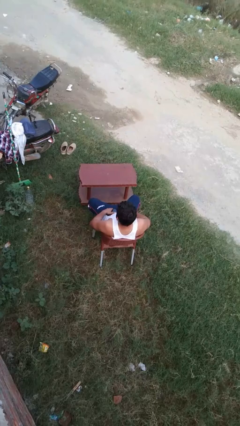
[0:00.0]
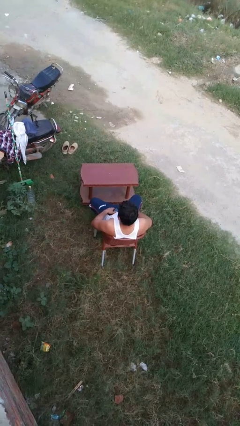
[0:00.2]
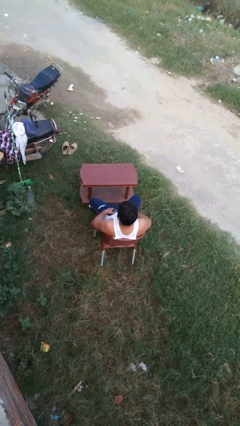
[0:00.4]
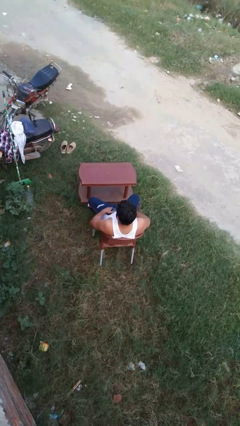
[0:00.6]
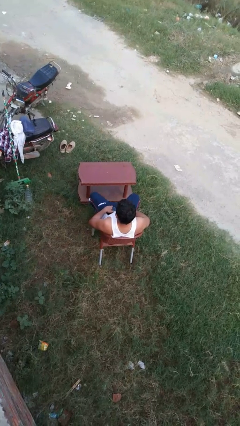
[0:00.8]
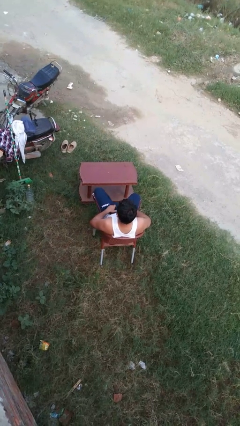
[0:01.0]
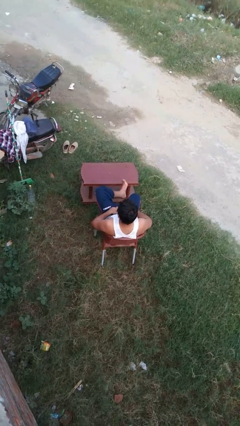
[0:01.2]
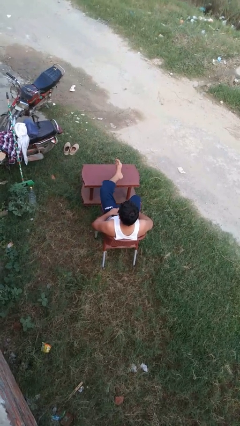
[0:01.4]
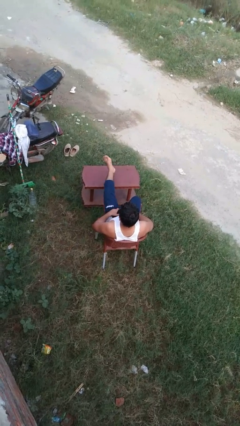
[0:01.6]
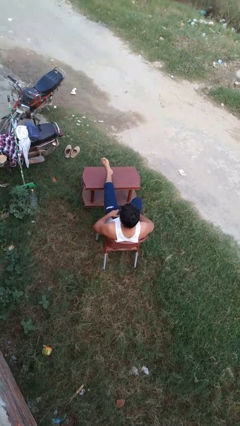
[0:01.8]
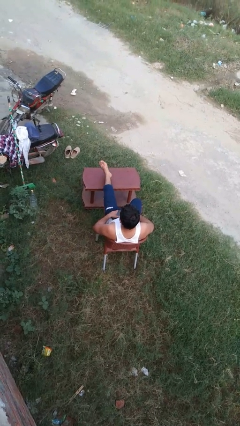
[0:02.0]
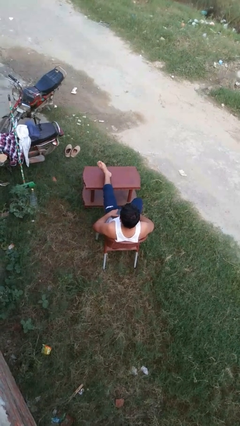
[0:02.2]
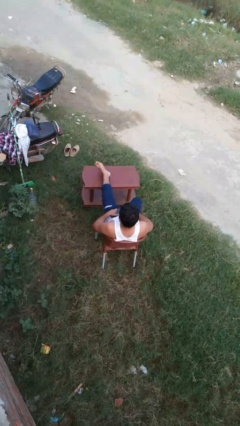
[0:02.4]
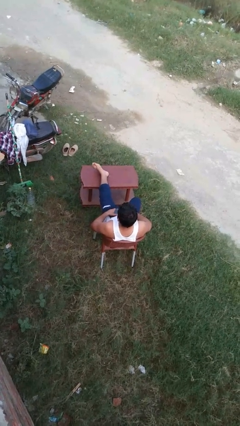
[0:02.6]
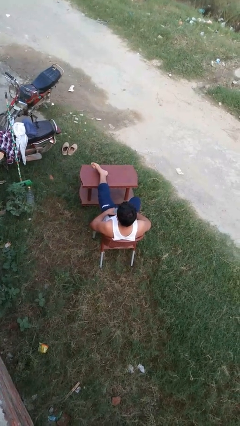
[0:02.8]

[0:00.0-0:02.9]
person puts feet up

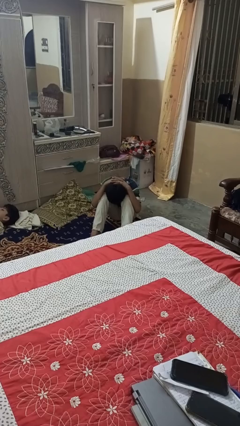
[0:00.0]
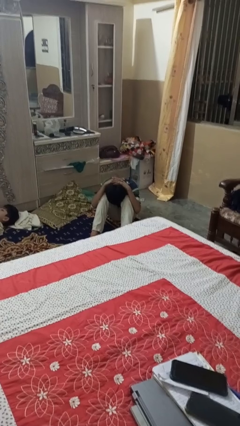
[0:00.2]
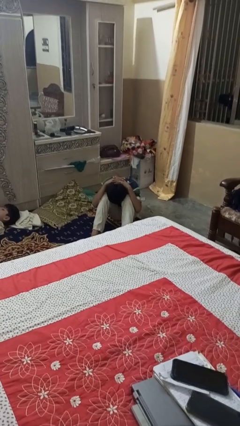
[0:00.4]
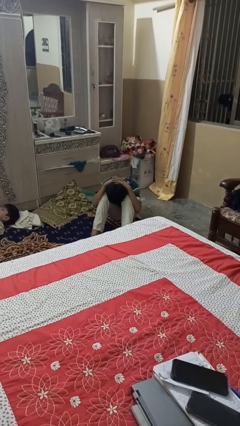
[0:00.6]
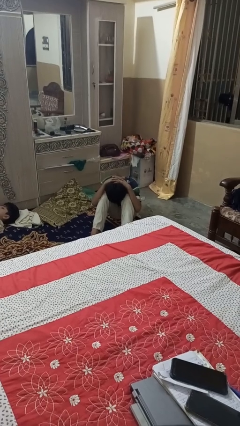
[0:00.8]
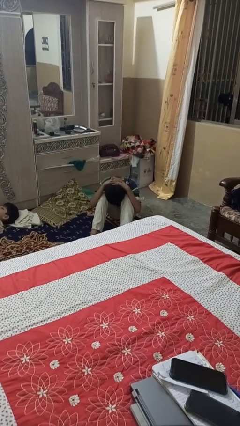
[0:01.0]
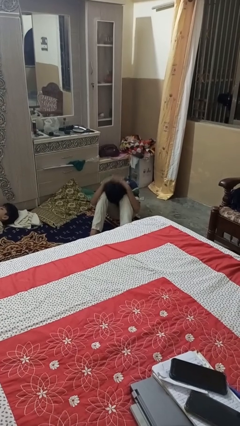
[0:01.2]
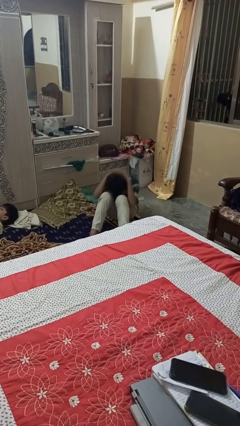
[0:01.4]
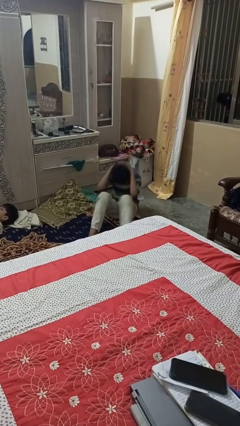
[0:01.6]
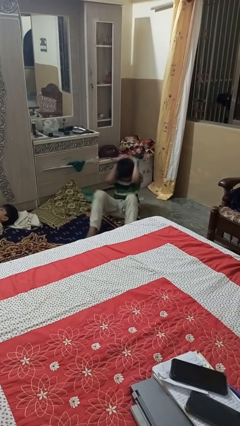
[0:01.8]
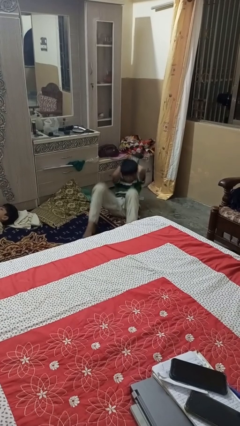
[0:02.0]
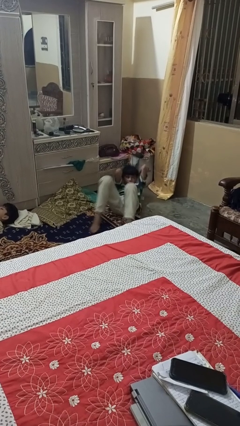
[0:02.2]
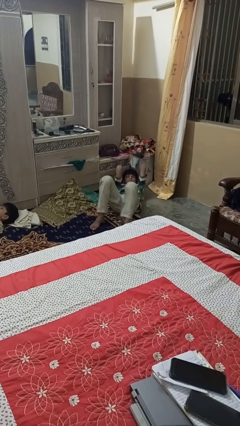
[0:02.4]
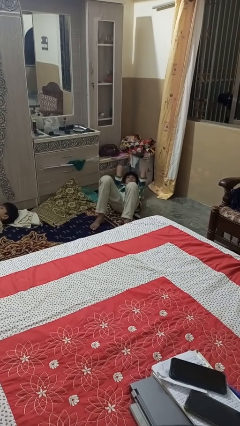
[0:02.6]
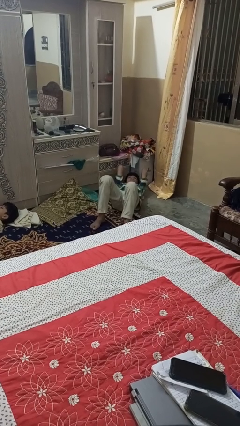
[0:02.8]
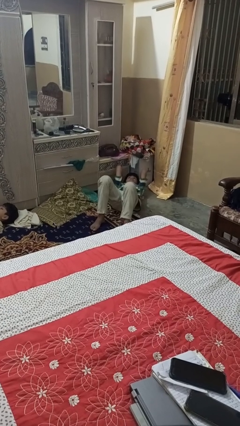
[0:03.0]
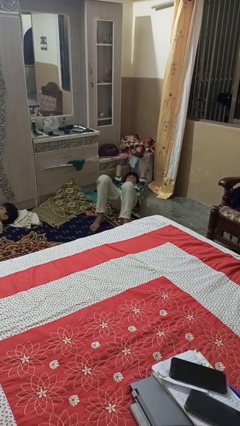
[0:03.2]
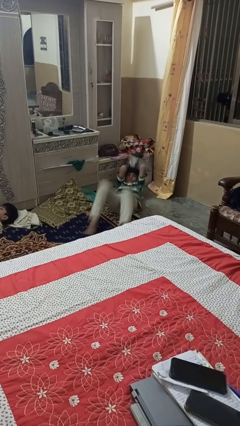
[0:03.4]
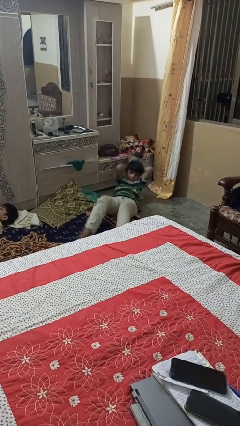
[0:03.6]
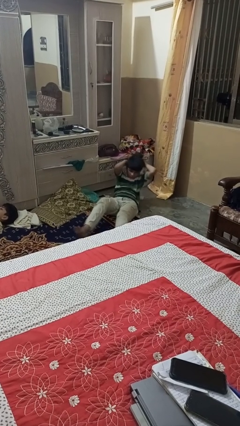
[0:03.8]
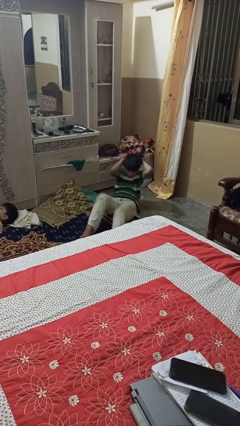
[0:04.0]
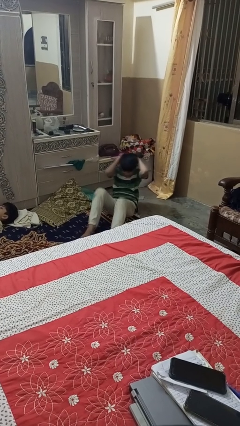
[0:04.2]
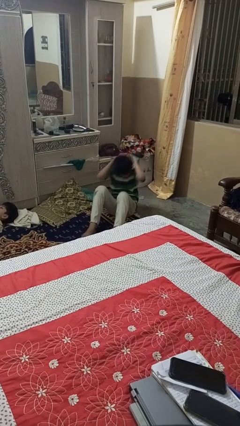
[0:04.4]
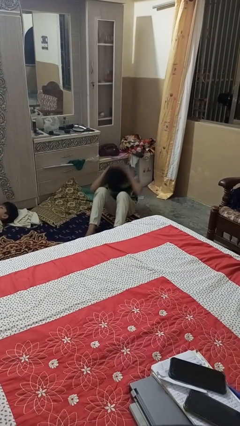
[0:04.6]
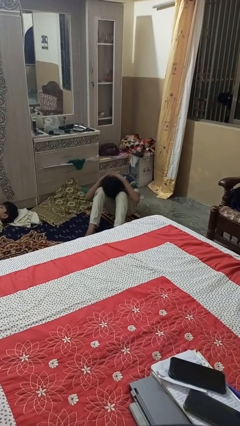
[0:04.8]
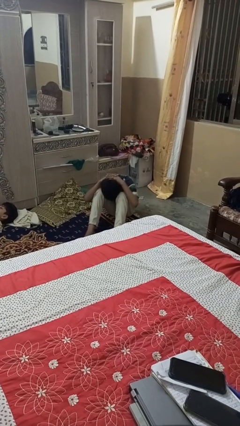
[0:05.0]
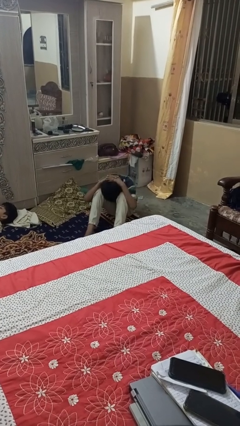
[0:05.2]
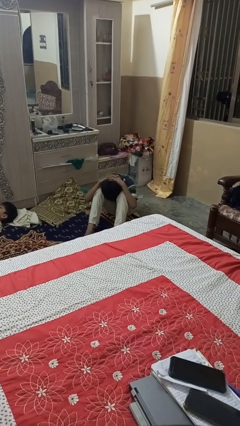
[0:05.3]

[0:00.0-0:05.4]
person exercises with situp

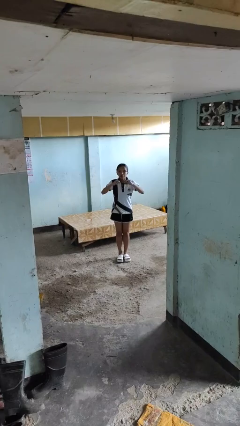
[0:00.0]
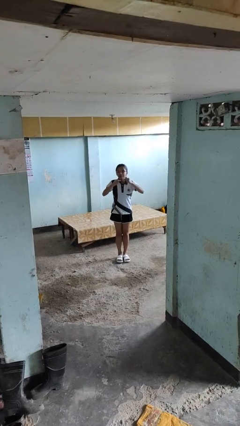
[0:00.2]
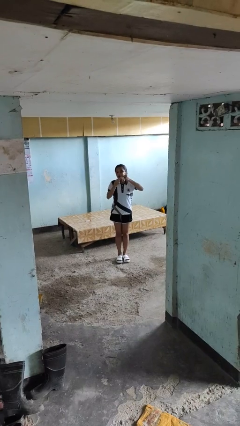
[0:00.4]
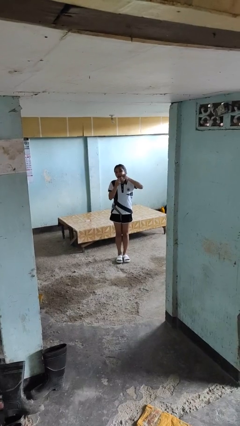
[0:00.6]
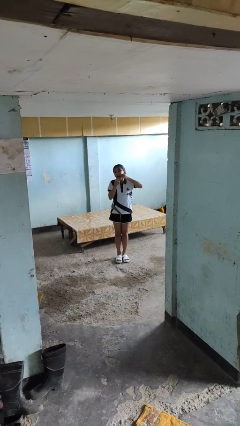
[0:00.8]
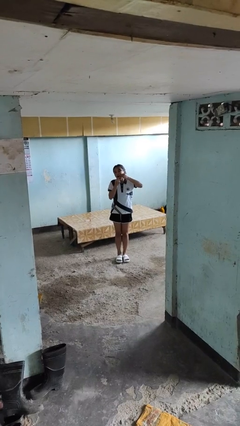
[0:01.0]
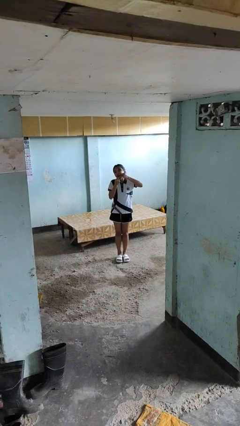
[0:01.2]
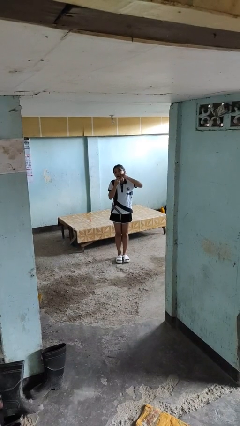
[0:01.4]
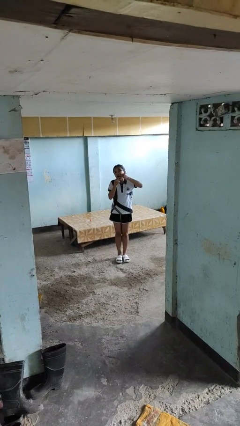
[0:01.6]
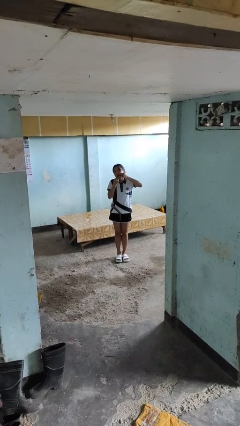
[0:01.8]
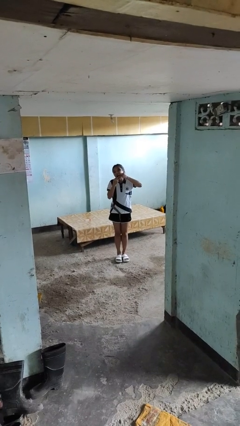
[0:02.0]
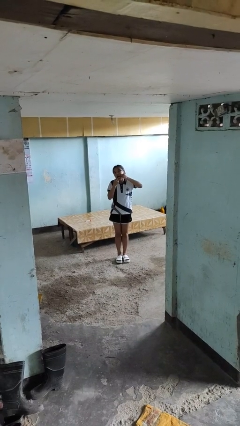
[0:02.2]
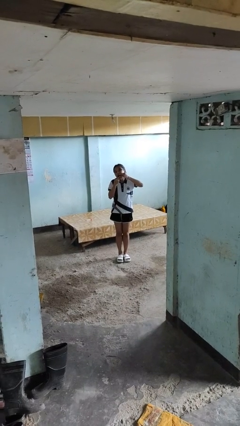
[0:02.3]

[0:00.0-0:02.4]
person flosses

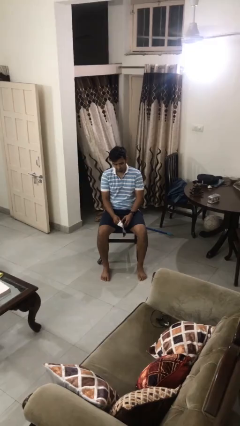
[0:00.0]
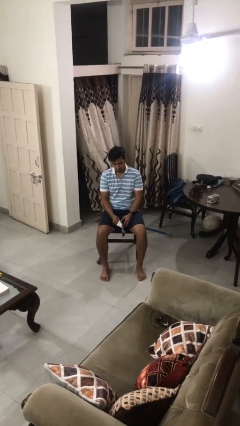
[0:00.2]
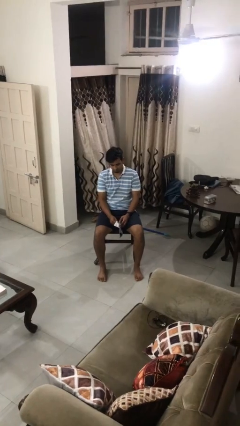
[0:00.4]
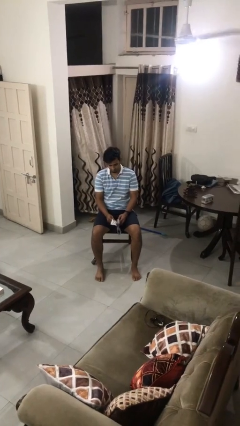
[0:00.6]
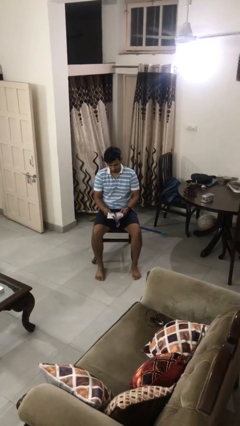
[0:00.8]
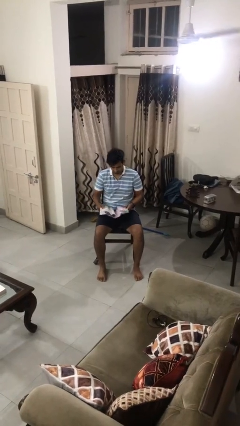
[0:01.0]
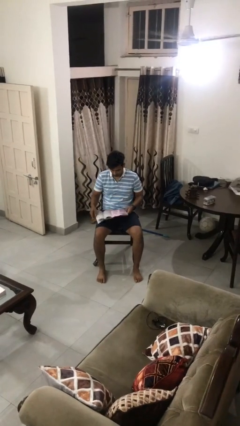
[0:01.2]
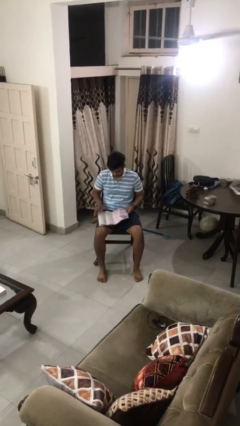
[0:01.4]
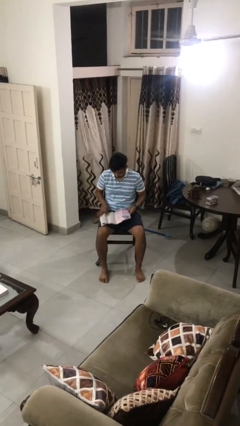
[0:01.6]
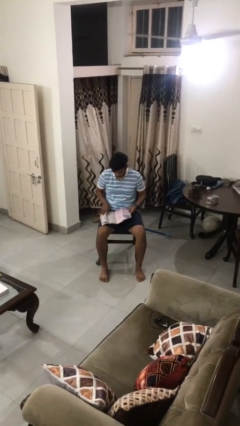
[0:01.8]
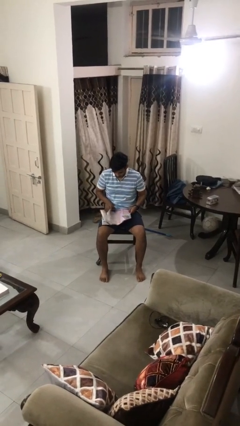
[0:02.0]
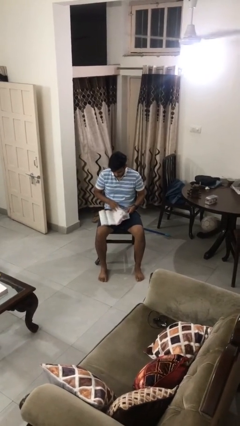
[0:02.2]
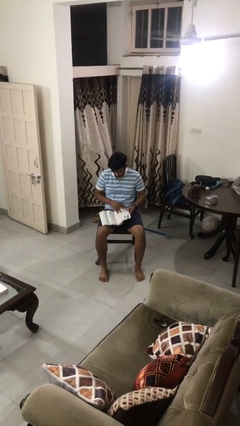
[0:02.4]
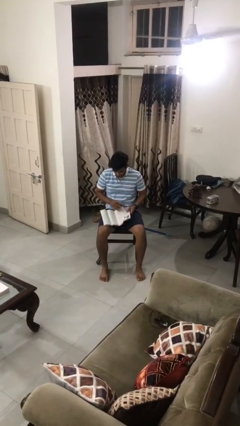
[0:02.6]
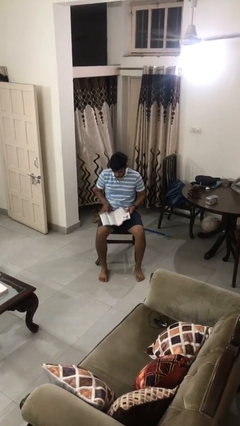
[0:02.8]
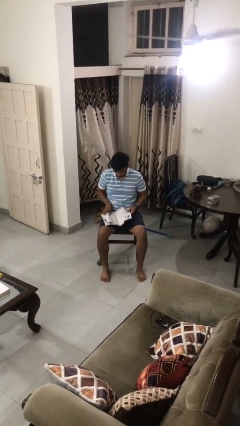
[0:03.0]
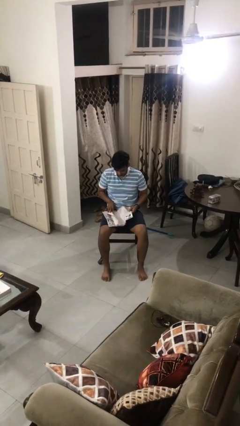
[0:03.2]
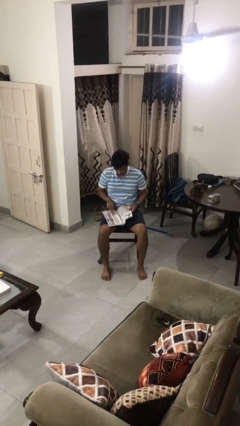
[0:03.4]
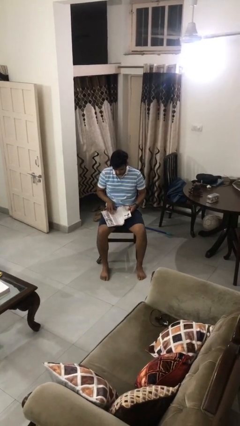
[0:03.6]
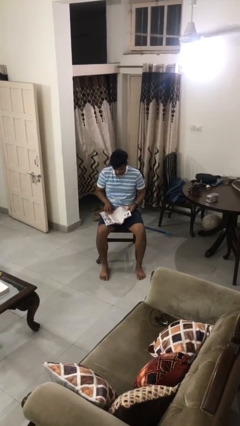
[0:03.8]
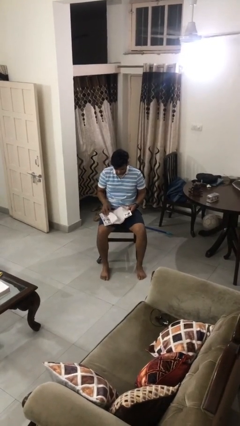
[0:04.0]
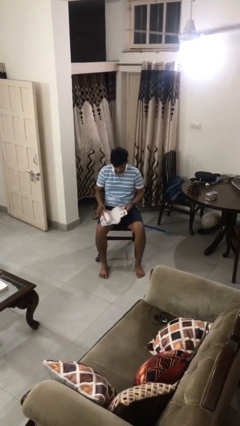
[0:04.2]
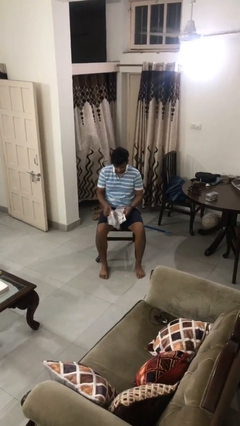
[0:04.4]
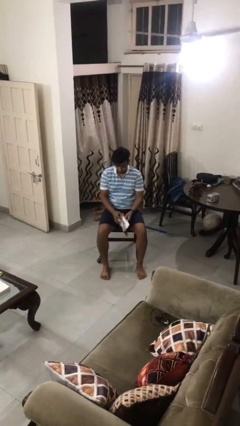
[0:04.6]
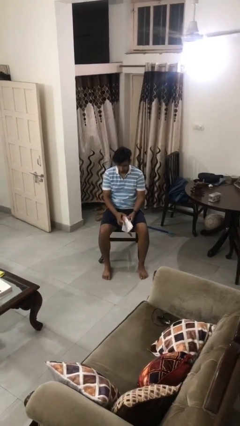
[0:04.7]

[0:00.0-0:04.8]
person reads magazine

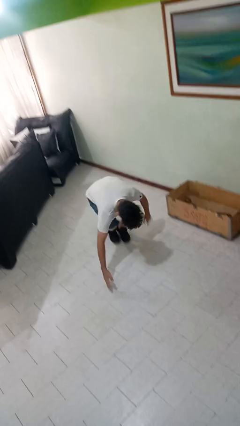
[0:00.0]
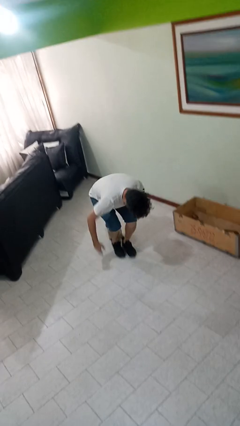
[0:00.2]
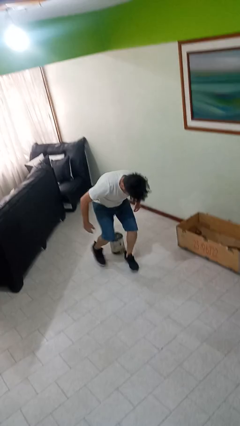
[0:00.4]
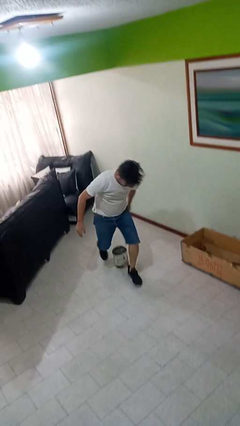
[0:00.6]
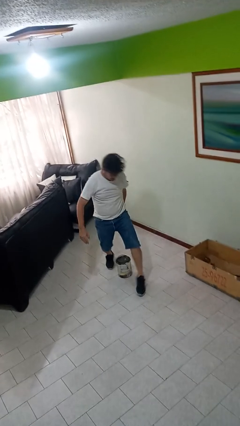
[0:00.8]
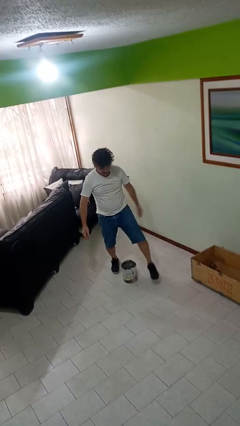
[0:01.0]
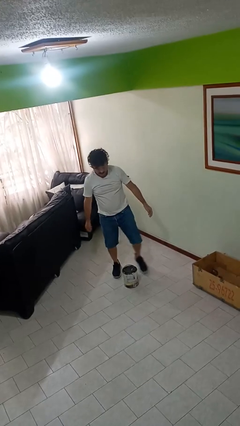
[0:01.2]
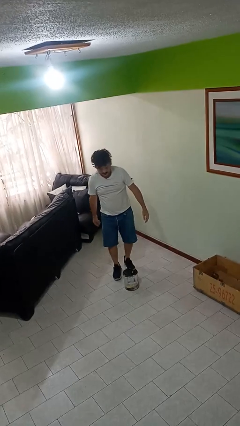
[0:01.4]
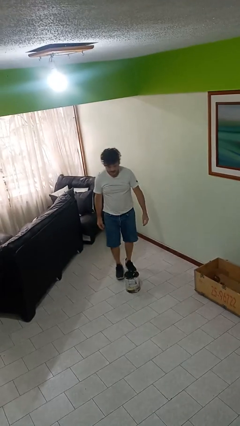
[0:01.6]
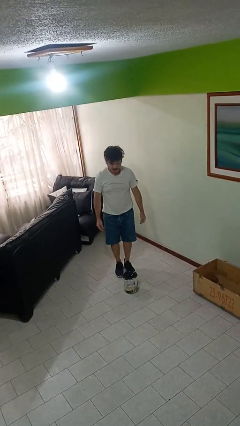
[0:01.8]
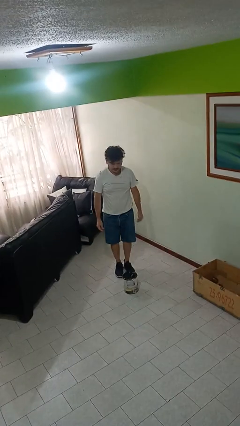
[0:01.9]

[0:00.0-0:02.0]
person stands up from floor
